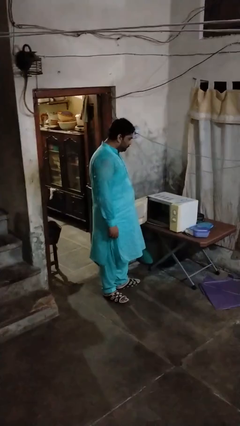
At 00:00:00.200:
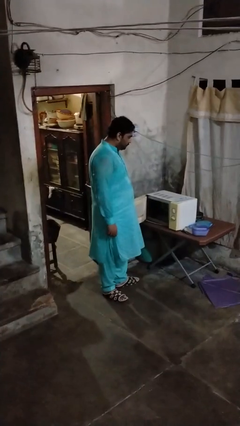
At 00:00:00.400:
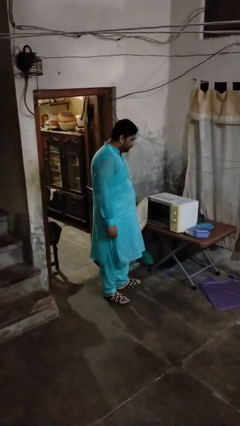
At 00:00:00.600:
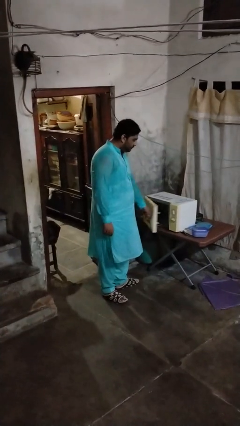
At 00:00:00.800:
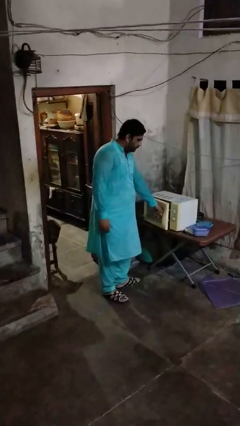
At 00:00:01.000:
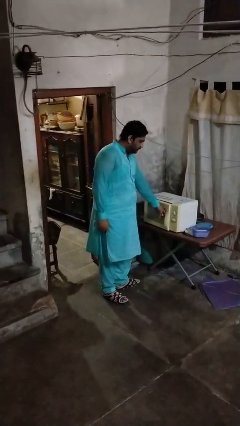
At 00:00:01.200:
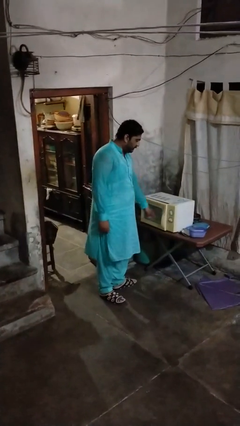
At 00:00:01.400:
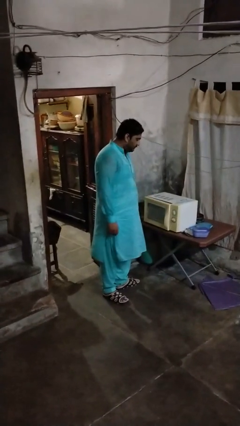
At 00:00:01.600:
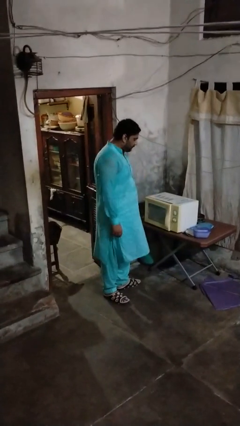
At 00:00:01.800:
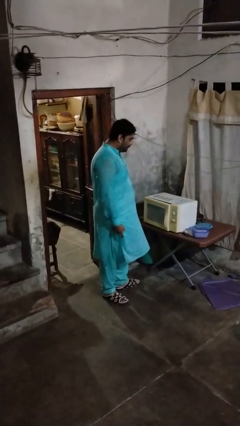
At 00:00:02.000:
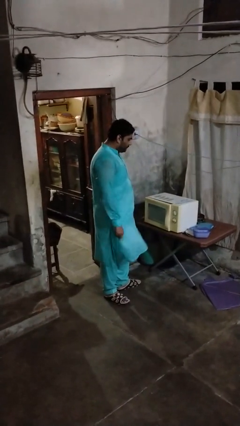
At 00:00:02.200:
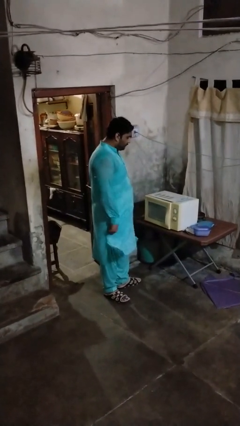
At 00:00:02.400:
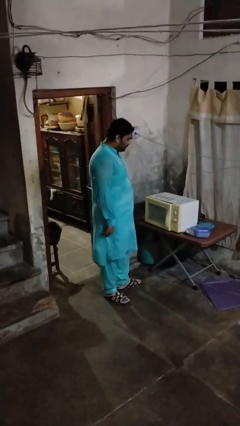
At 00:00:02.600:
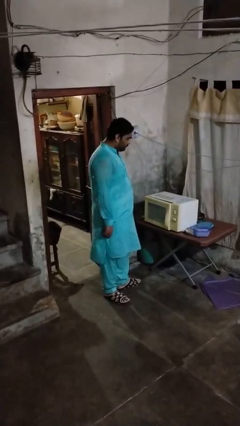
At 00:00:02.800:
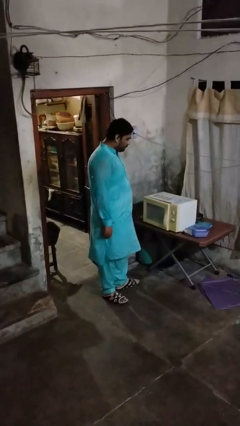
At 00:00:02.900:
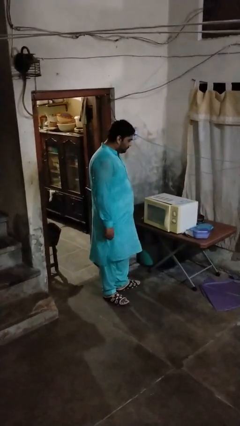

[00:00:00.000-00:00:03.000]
person closes microwave

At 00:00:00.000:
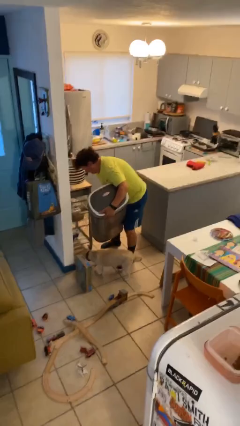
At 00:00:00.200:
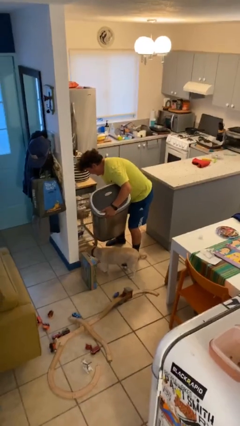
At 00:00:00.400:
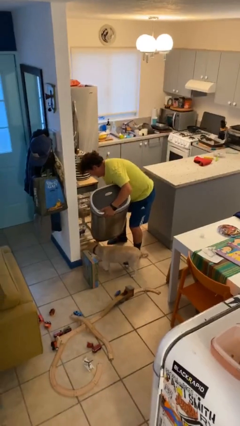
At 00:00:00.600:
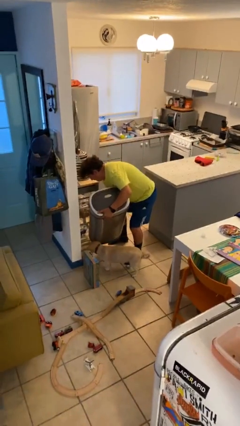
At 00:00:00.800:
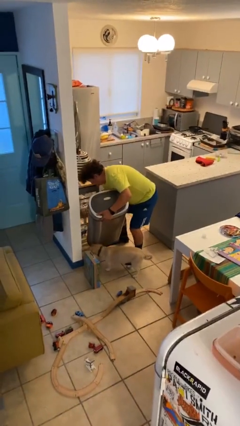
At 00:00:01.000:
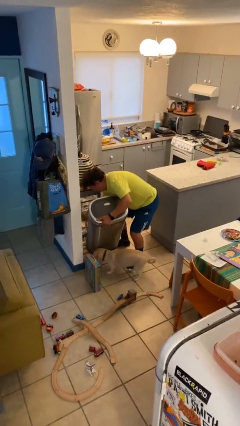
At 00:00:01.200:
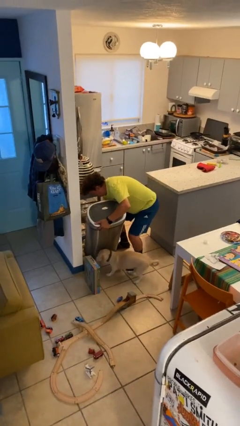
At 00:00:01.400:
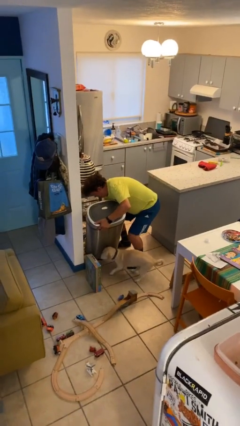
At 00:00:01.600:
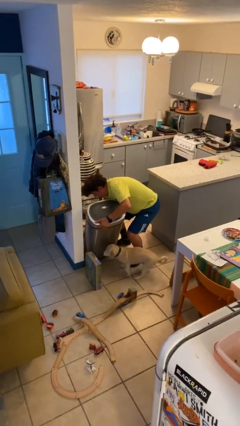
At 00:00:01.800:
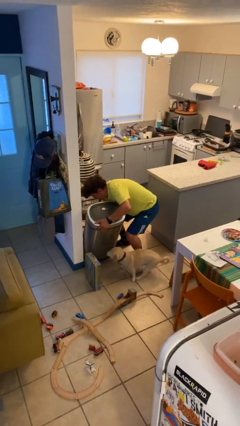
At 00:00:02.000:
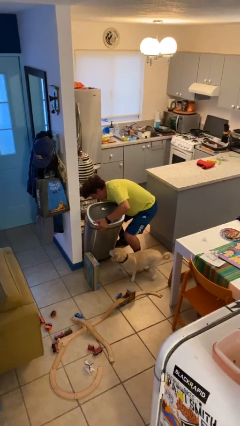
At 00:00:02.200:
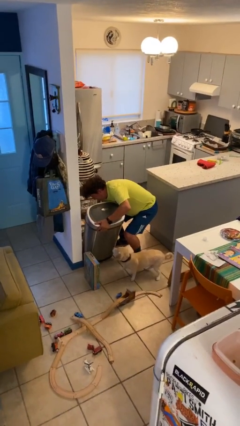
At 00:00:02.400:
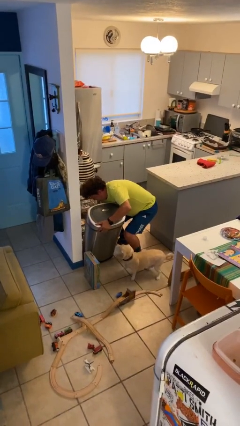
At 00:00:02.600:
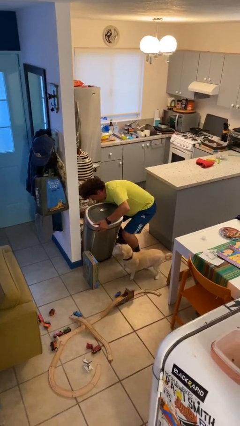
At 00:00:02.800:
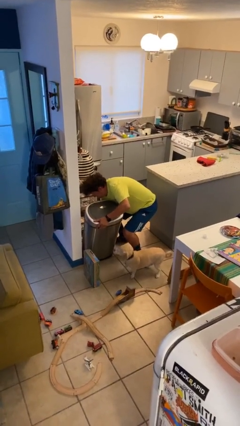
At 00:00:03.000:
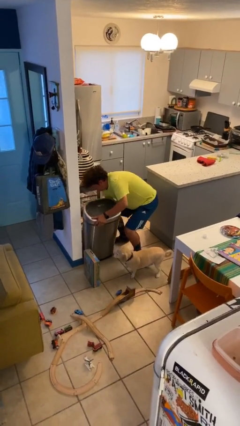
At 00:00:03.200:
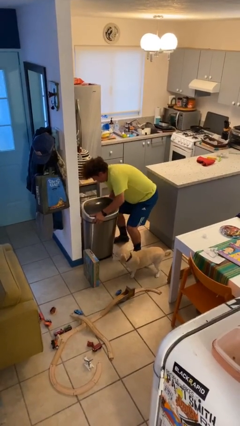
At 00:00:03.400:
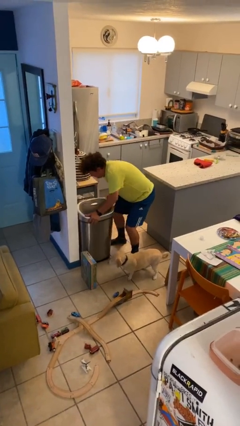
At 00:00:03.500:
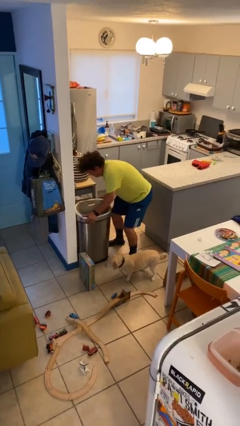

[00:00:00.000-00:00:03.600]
person puts down object on floor

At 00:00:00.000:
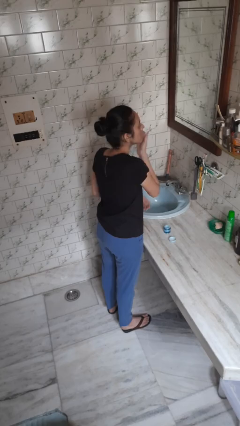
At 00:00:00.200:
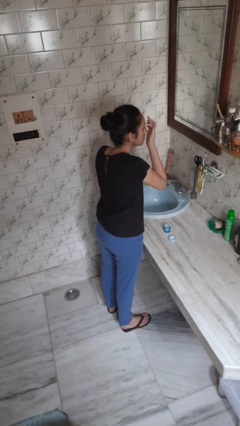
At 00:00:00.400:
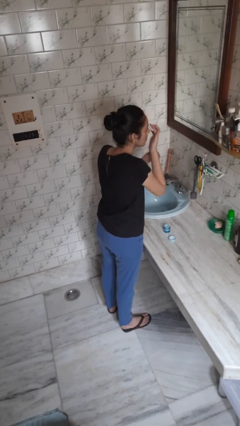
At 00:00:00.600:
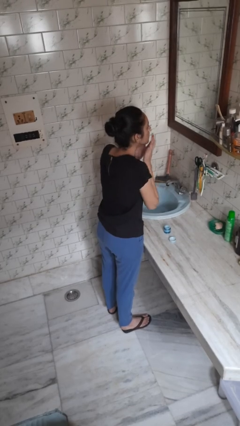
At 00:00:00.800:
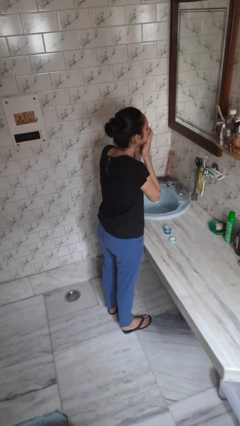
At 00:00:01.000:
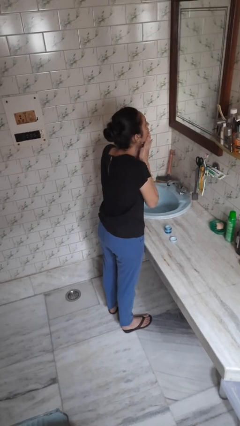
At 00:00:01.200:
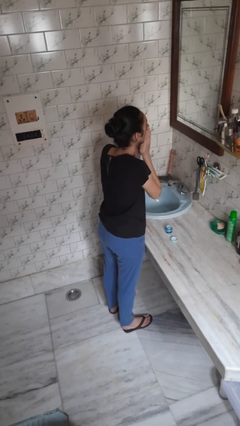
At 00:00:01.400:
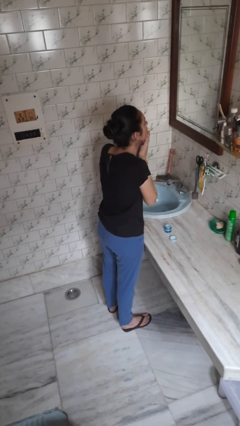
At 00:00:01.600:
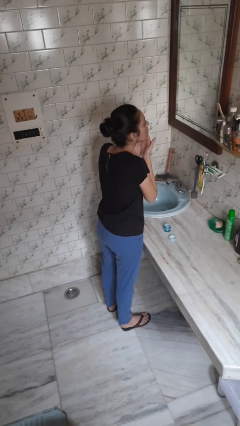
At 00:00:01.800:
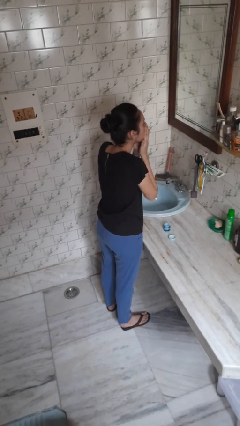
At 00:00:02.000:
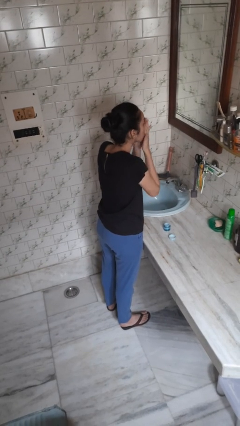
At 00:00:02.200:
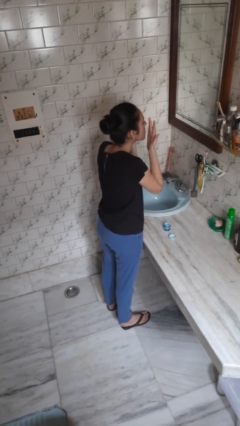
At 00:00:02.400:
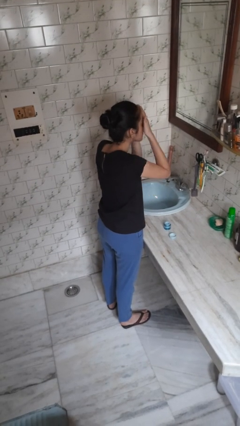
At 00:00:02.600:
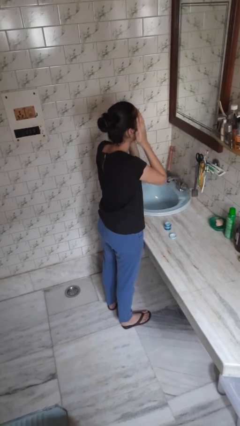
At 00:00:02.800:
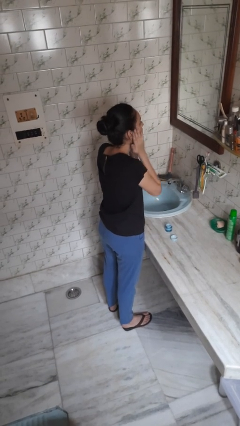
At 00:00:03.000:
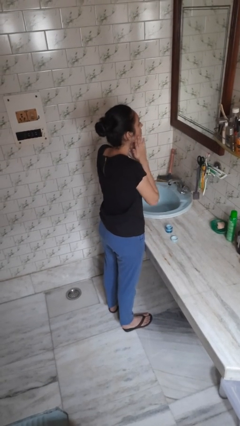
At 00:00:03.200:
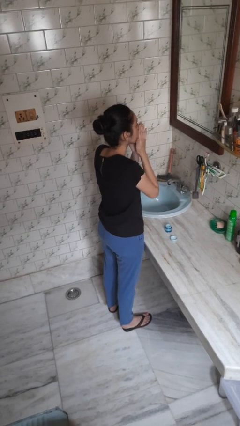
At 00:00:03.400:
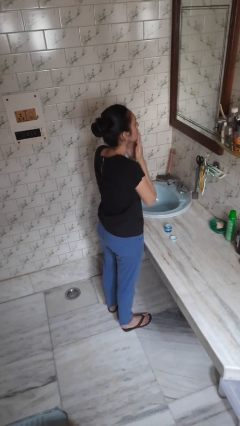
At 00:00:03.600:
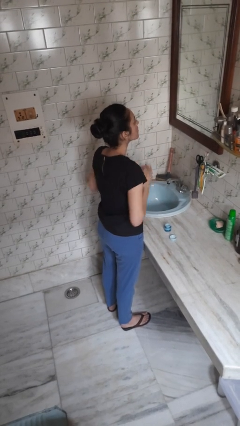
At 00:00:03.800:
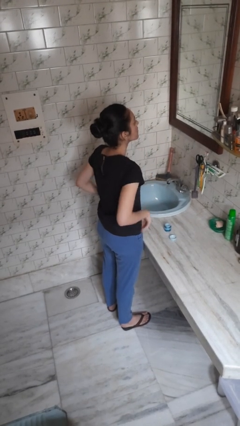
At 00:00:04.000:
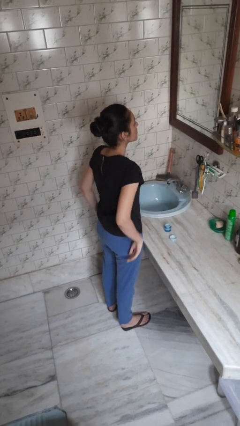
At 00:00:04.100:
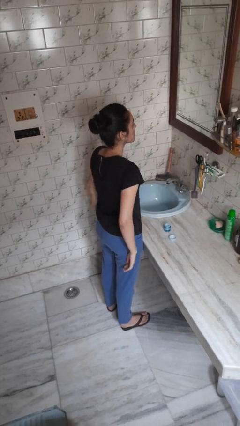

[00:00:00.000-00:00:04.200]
person applies facial moisturizer

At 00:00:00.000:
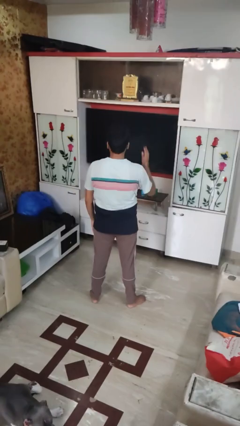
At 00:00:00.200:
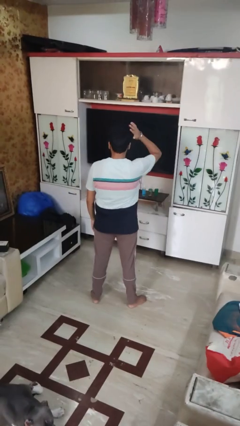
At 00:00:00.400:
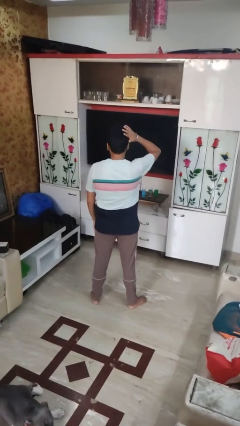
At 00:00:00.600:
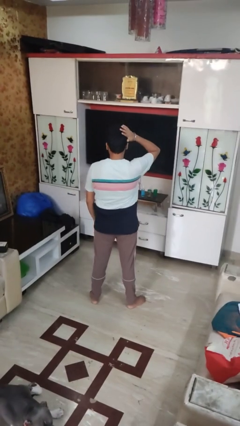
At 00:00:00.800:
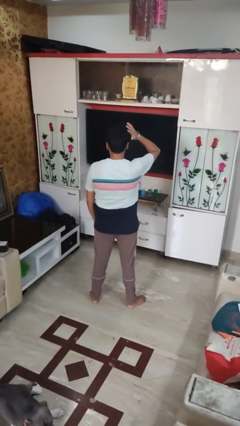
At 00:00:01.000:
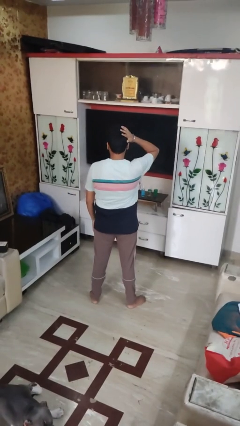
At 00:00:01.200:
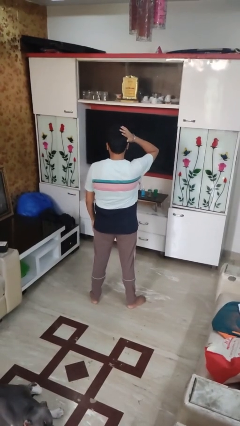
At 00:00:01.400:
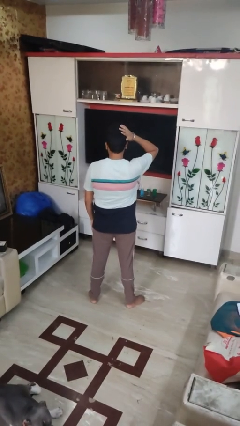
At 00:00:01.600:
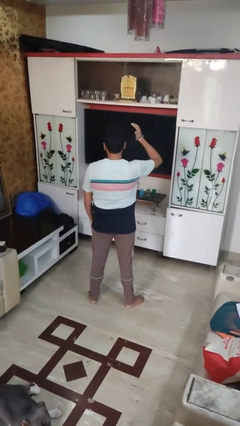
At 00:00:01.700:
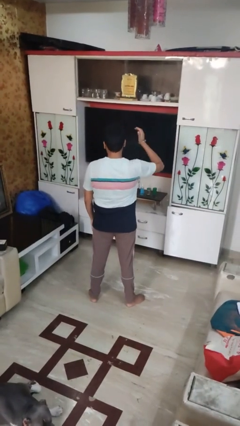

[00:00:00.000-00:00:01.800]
person pats head

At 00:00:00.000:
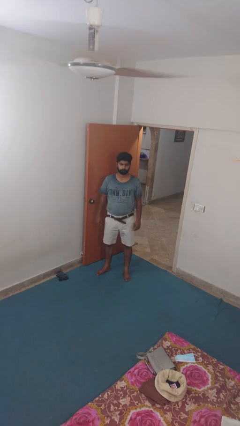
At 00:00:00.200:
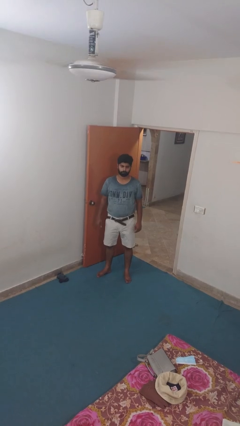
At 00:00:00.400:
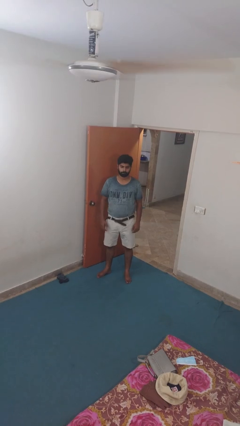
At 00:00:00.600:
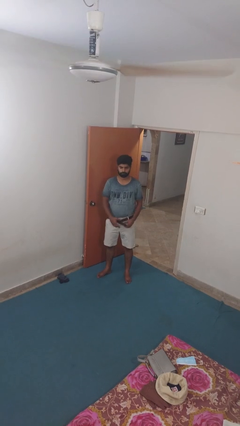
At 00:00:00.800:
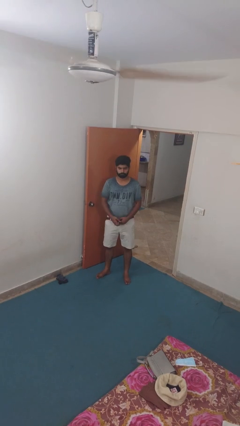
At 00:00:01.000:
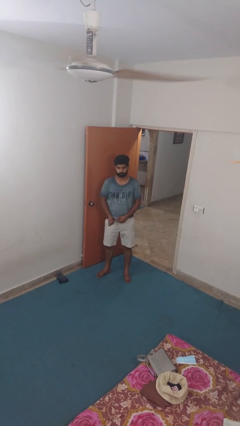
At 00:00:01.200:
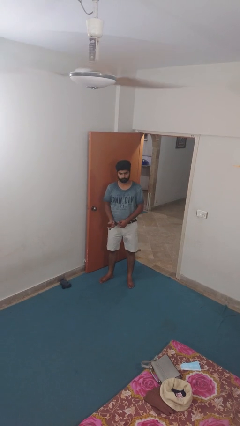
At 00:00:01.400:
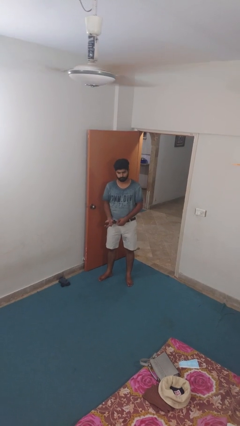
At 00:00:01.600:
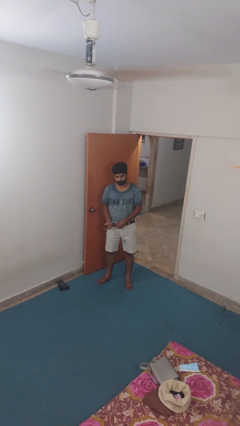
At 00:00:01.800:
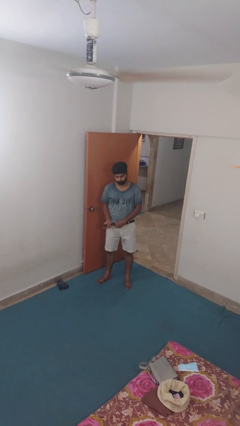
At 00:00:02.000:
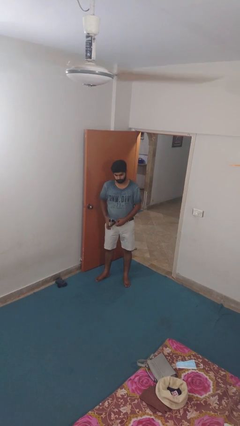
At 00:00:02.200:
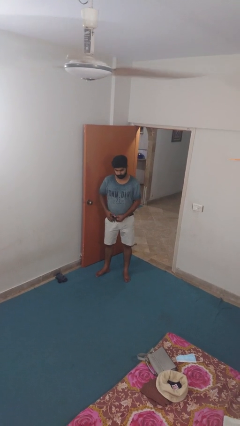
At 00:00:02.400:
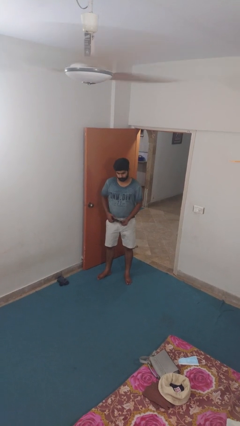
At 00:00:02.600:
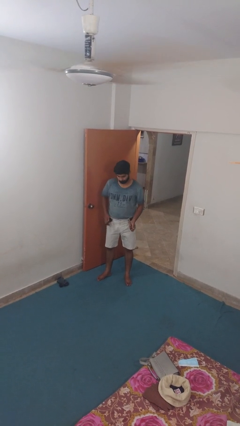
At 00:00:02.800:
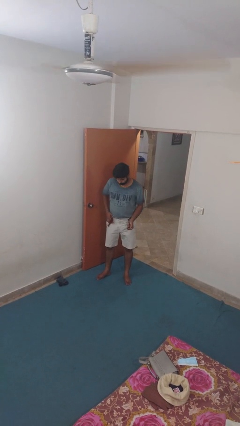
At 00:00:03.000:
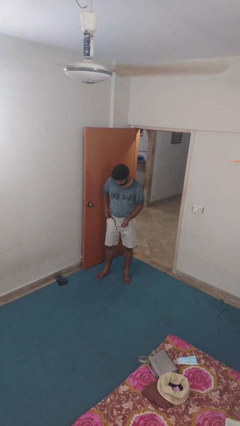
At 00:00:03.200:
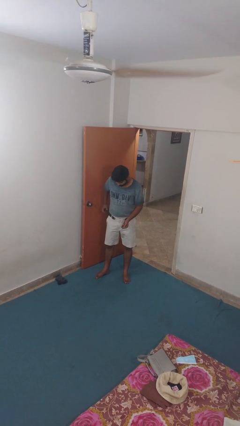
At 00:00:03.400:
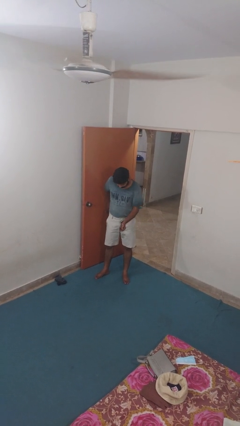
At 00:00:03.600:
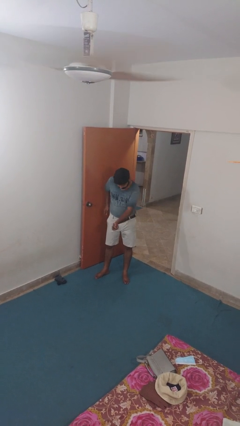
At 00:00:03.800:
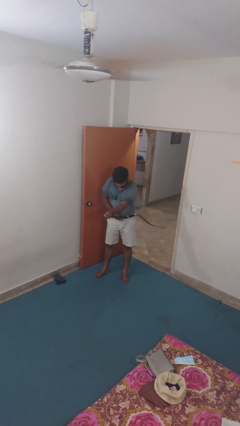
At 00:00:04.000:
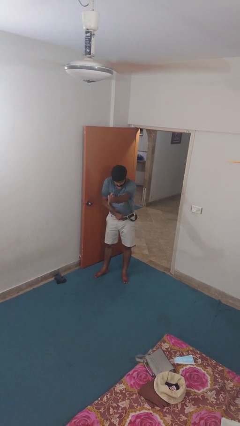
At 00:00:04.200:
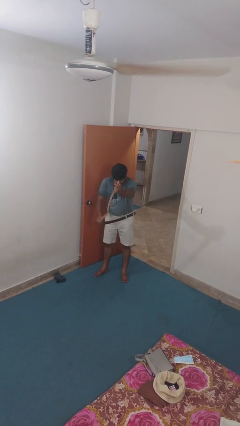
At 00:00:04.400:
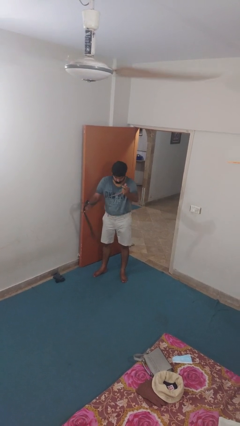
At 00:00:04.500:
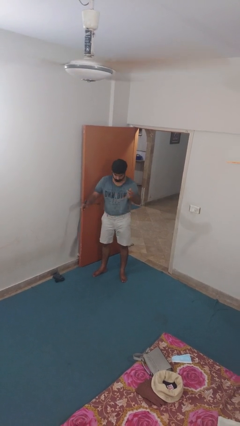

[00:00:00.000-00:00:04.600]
person takes off belt
